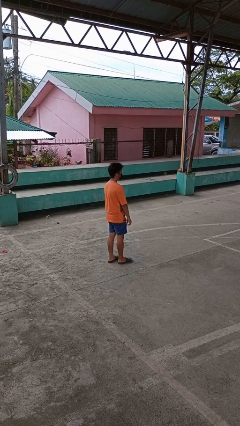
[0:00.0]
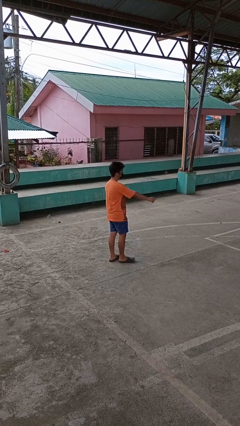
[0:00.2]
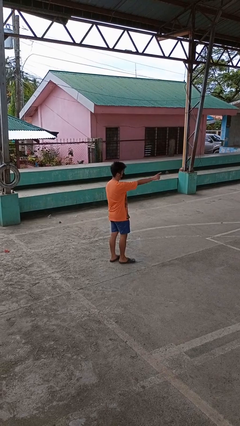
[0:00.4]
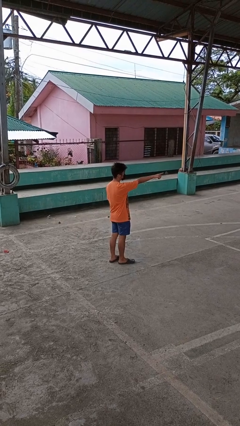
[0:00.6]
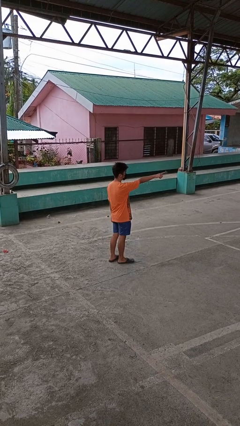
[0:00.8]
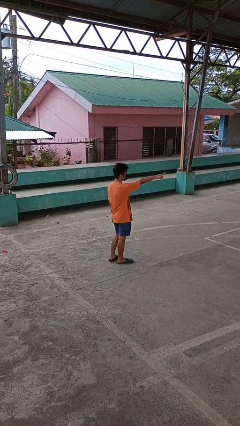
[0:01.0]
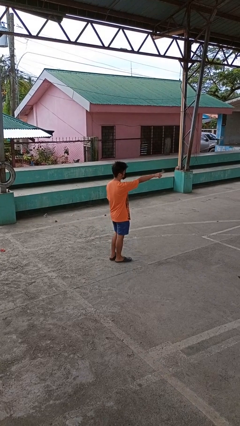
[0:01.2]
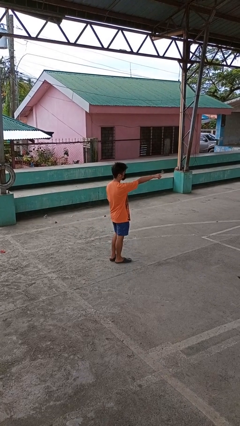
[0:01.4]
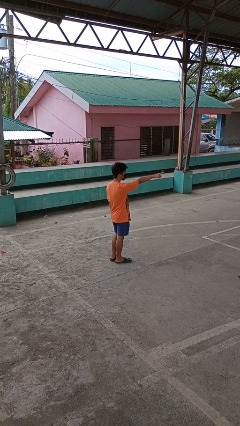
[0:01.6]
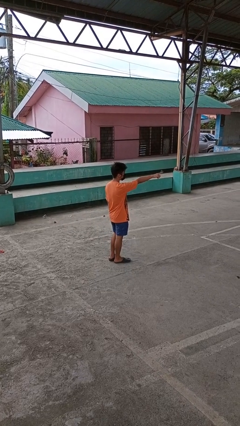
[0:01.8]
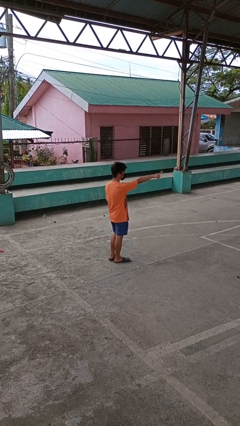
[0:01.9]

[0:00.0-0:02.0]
person points at person

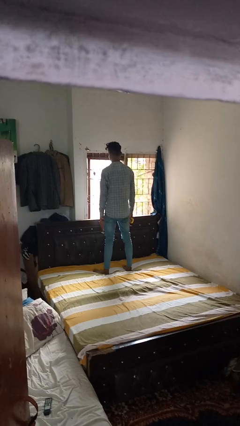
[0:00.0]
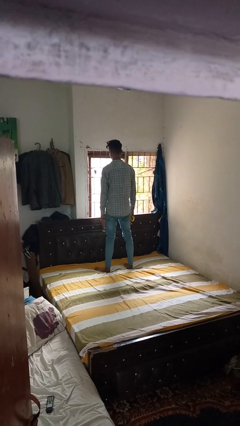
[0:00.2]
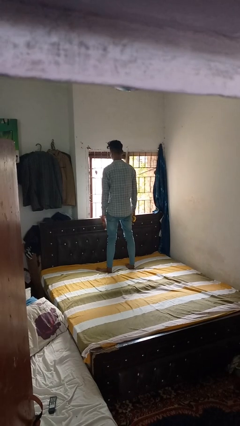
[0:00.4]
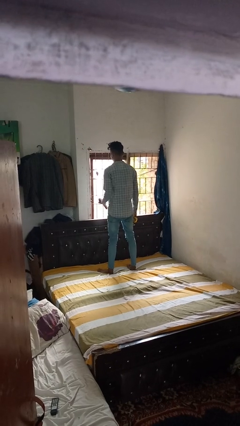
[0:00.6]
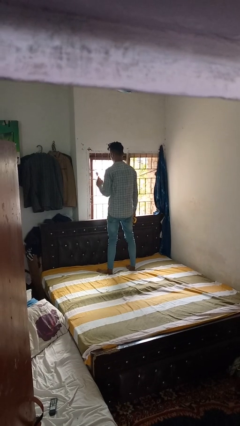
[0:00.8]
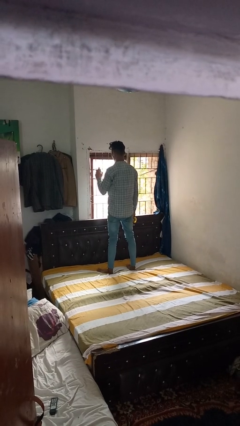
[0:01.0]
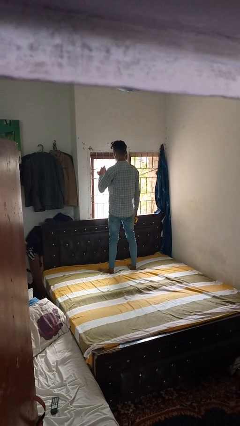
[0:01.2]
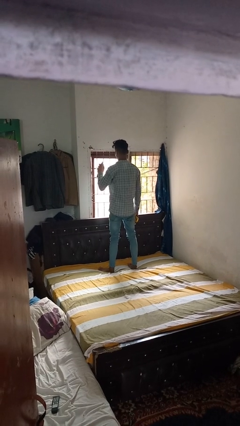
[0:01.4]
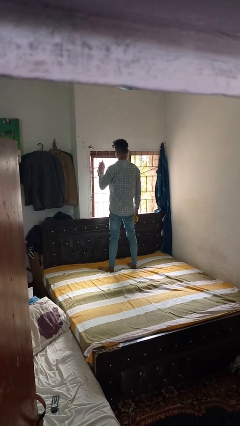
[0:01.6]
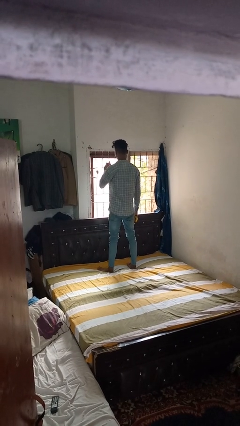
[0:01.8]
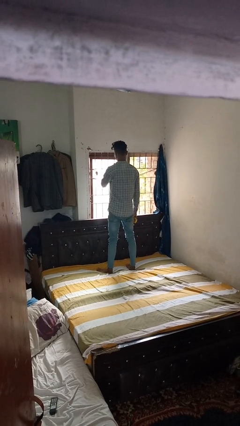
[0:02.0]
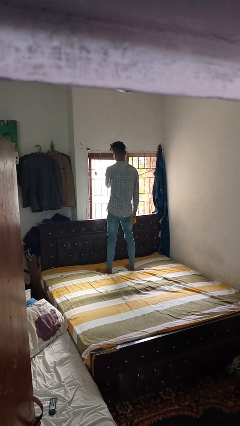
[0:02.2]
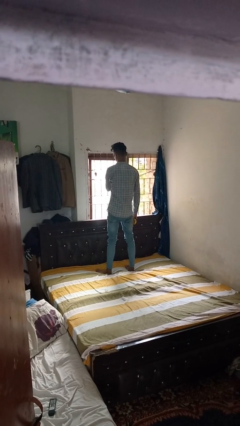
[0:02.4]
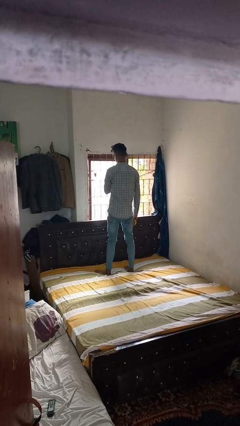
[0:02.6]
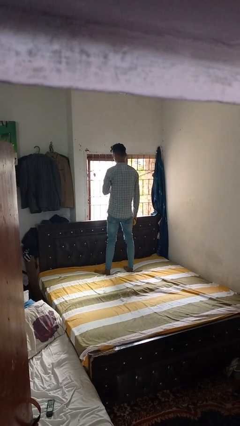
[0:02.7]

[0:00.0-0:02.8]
person sprays from bottle

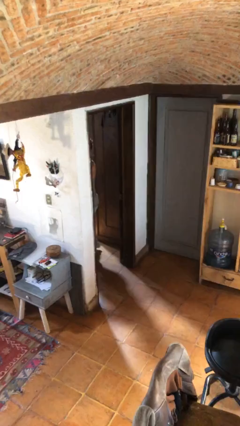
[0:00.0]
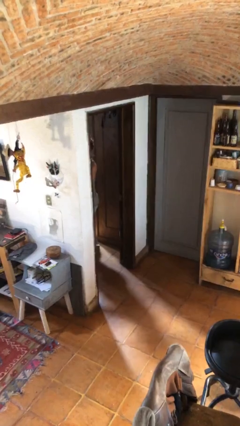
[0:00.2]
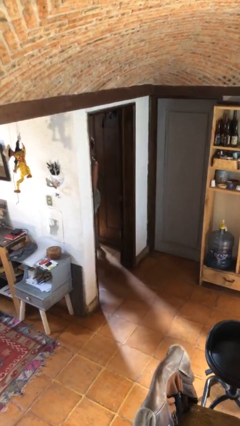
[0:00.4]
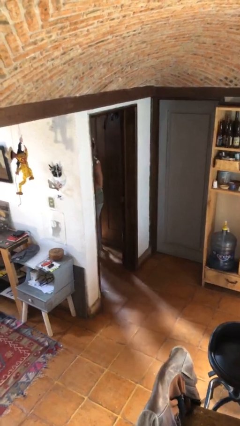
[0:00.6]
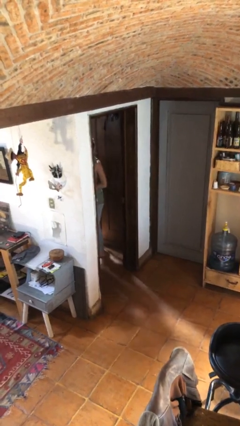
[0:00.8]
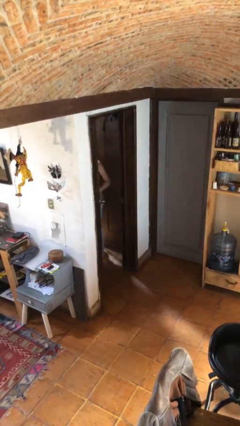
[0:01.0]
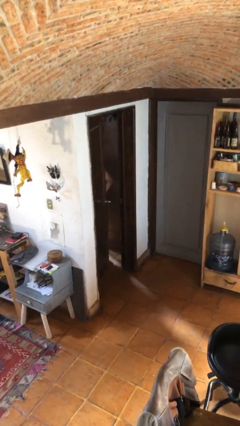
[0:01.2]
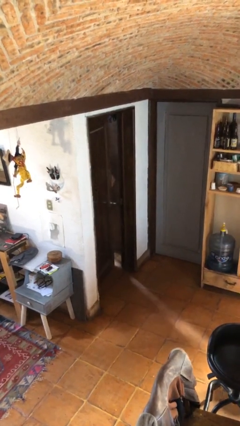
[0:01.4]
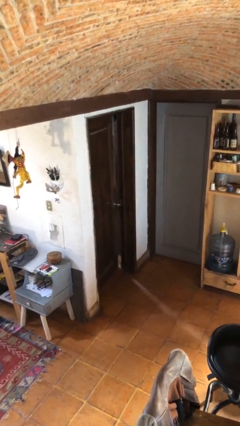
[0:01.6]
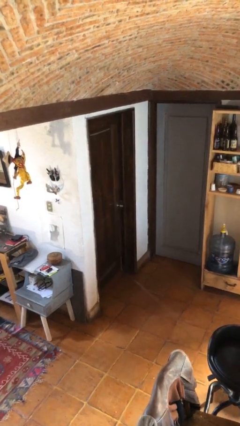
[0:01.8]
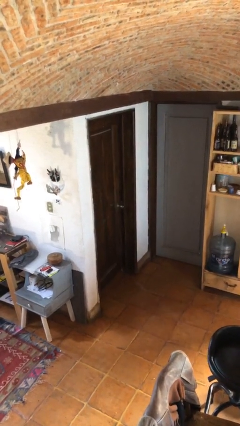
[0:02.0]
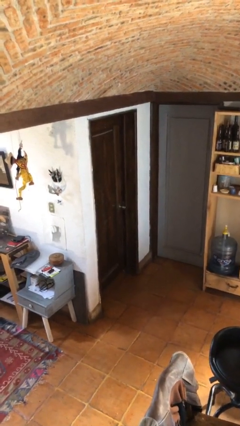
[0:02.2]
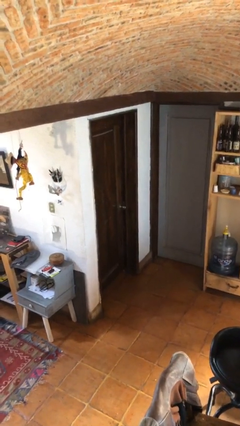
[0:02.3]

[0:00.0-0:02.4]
person closes facility door

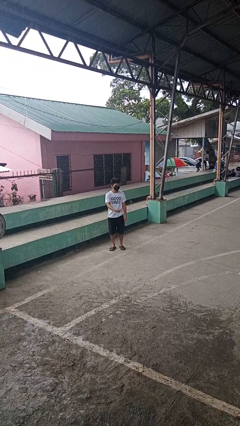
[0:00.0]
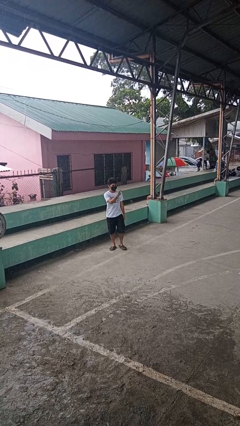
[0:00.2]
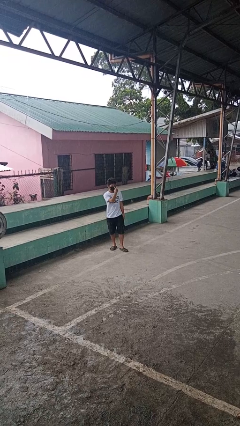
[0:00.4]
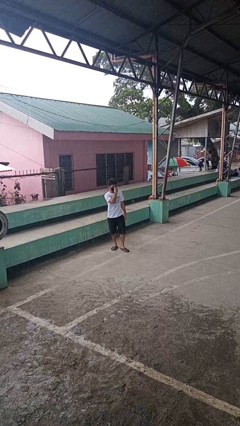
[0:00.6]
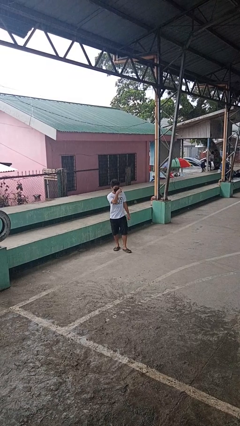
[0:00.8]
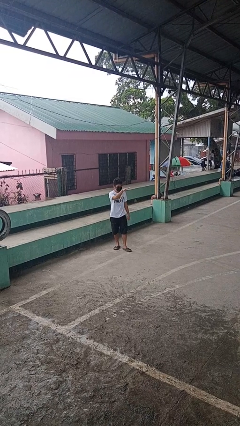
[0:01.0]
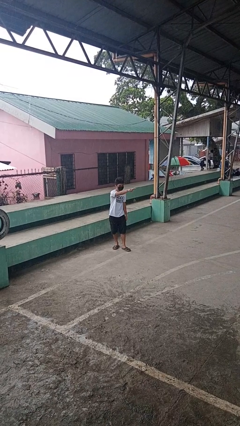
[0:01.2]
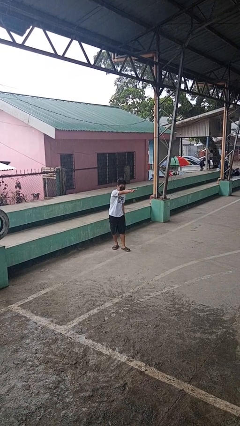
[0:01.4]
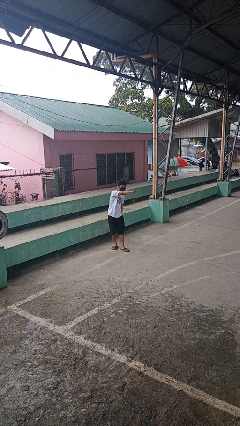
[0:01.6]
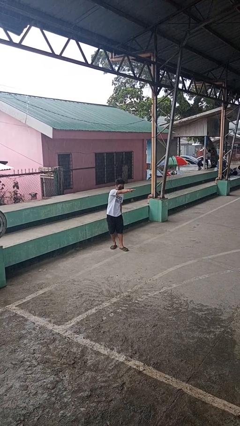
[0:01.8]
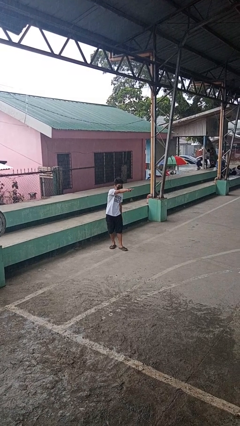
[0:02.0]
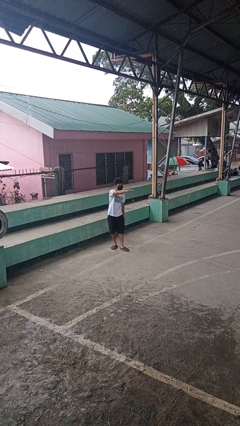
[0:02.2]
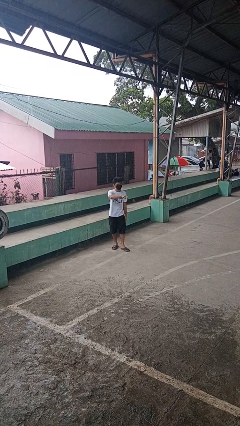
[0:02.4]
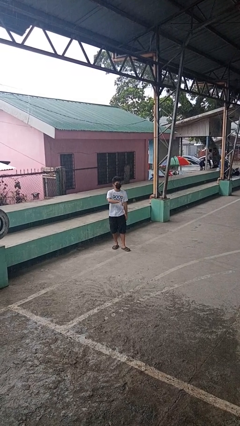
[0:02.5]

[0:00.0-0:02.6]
person gestures watch closely

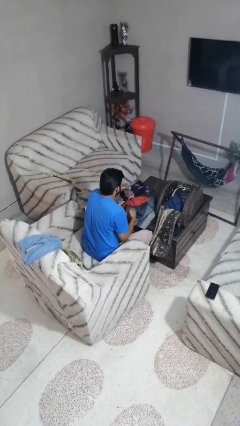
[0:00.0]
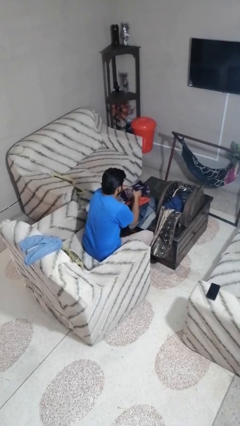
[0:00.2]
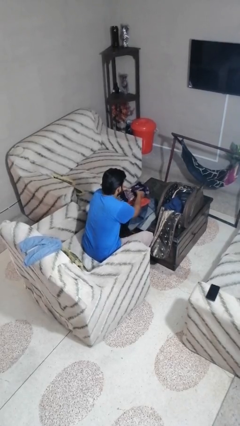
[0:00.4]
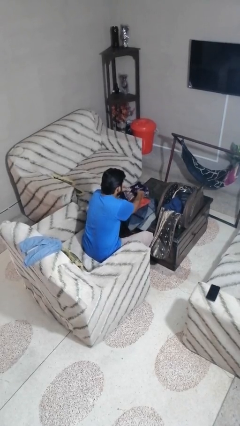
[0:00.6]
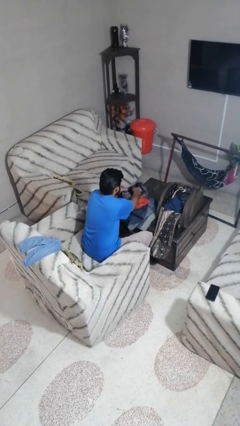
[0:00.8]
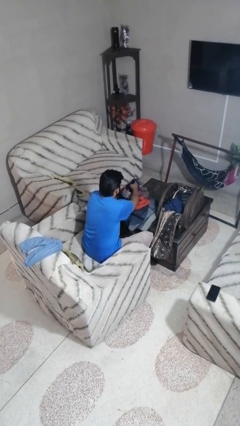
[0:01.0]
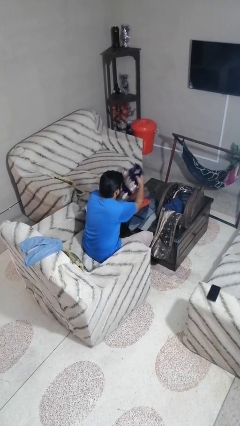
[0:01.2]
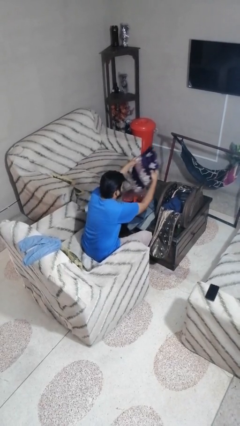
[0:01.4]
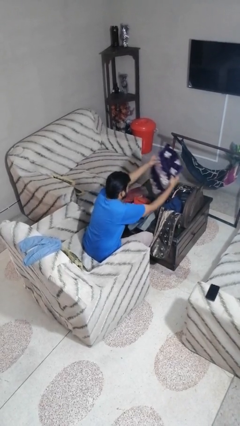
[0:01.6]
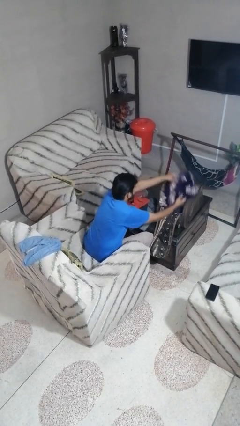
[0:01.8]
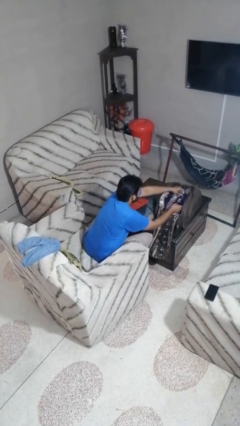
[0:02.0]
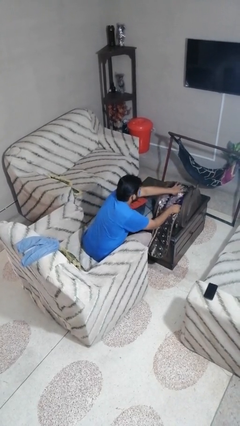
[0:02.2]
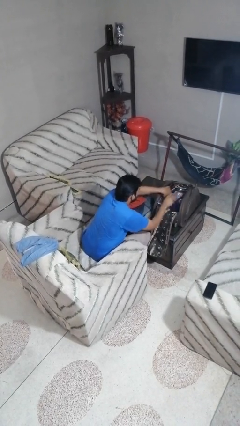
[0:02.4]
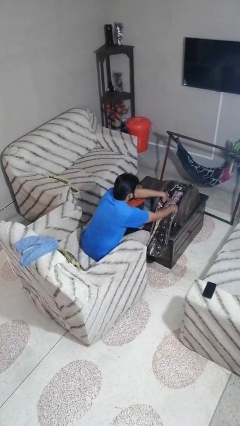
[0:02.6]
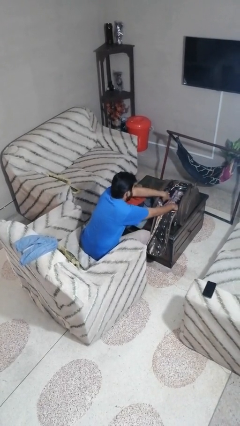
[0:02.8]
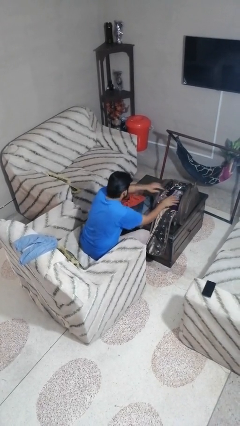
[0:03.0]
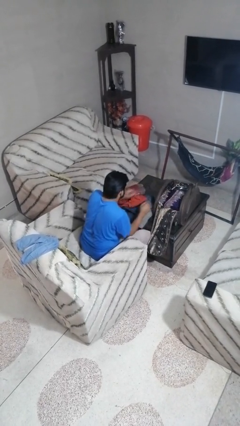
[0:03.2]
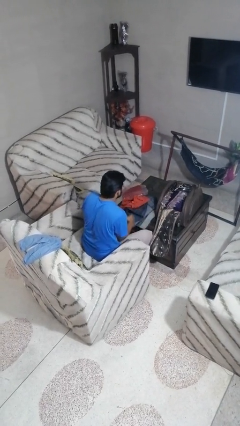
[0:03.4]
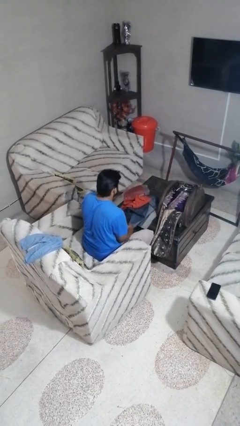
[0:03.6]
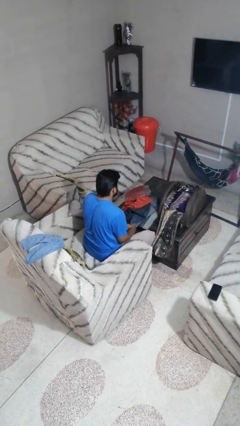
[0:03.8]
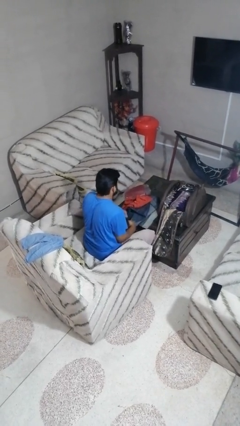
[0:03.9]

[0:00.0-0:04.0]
person loads clothes into suitcase

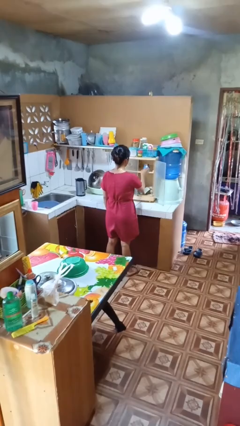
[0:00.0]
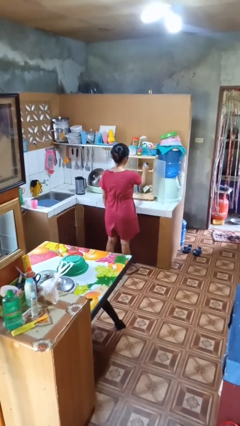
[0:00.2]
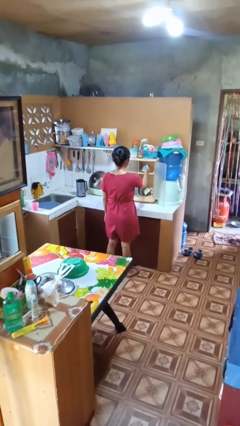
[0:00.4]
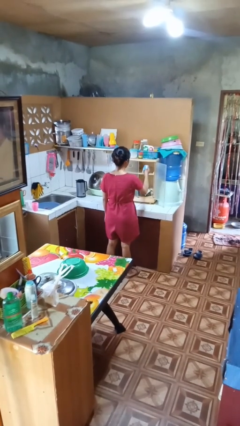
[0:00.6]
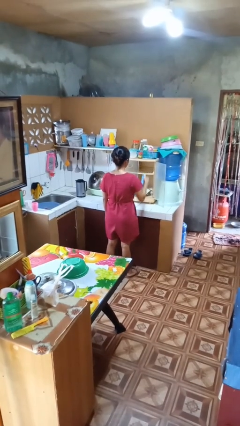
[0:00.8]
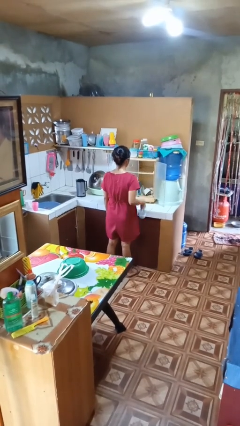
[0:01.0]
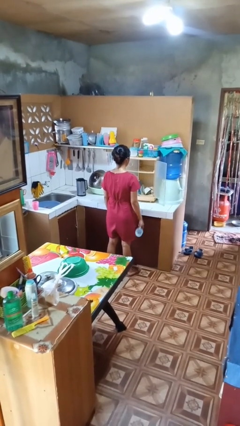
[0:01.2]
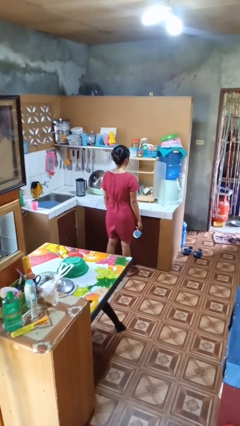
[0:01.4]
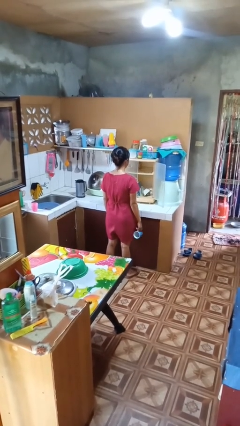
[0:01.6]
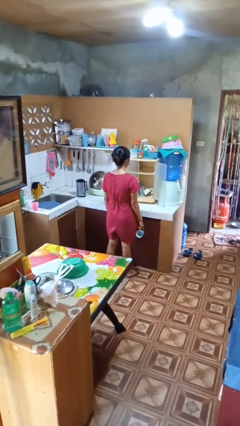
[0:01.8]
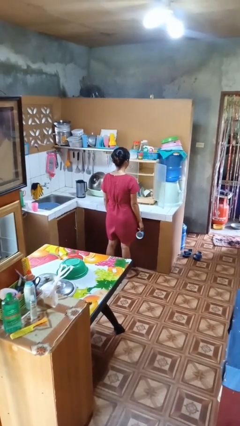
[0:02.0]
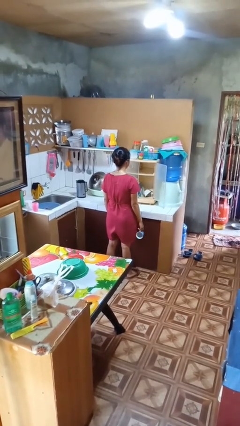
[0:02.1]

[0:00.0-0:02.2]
person takes object from cabinet

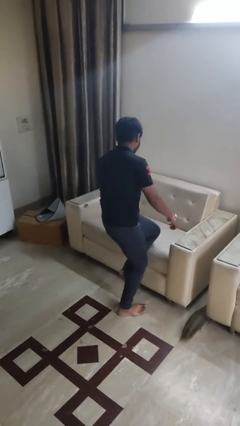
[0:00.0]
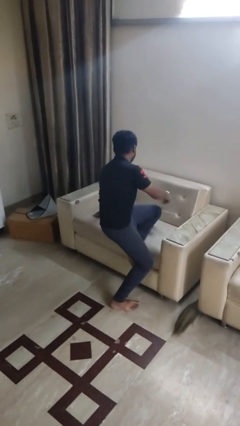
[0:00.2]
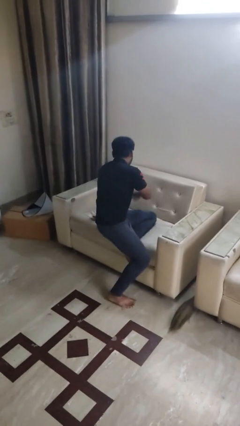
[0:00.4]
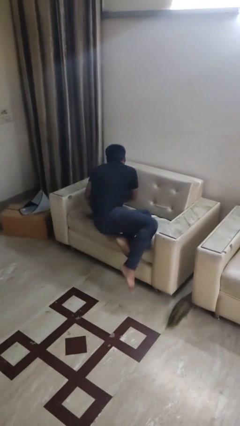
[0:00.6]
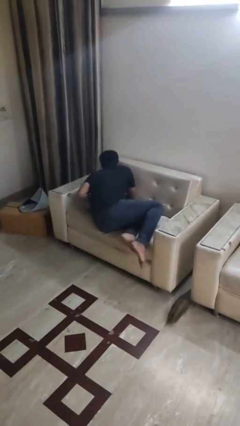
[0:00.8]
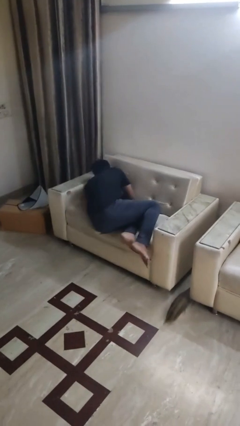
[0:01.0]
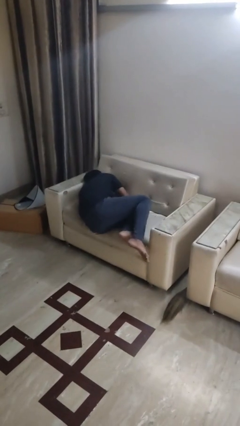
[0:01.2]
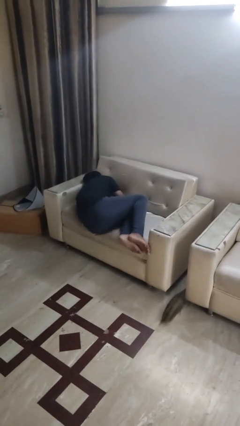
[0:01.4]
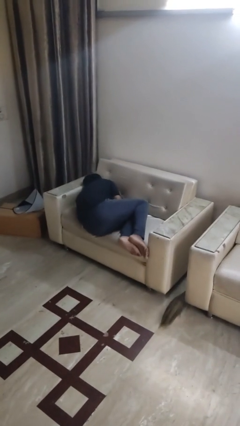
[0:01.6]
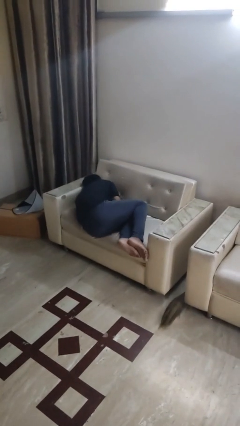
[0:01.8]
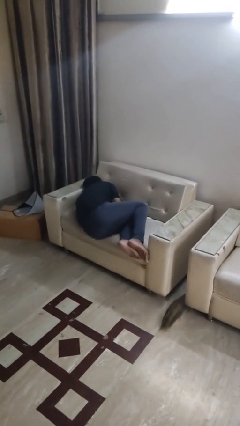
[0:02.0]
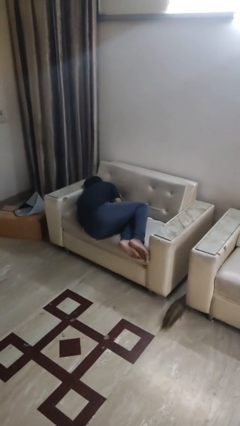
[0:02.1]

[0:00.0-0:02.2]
person lies down on bed
